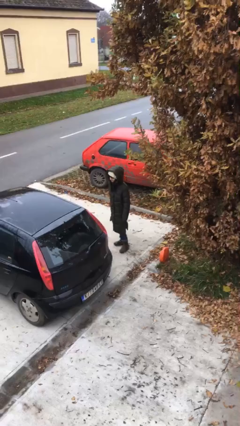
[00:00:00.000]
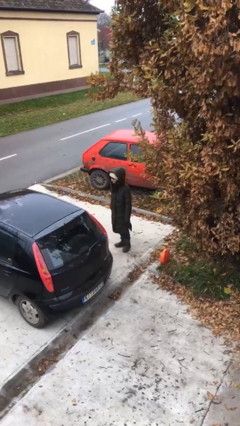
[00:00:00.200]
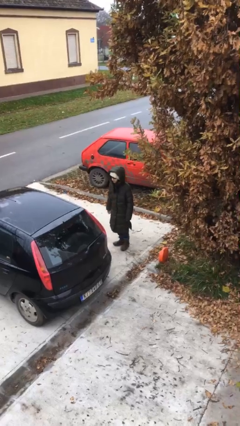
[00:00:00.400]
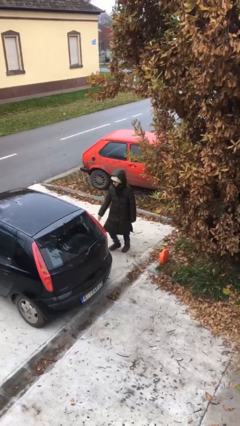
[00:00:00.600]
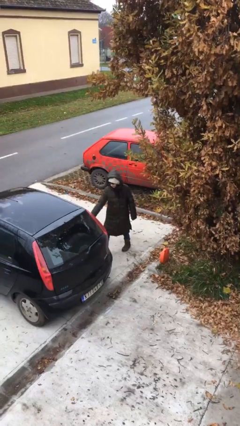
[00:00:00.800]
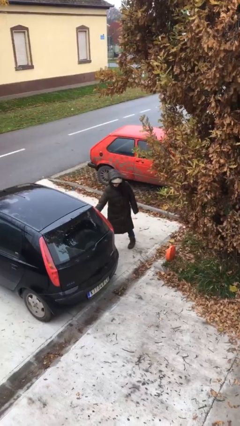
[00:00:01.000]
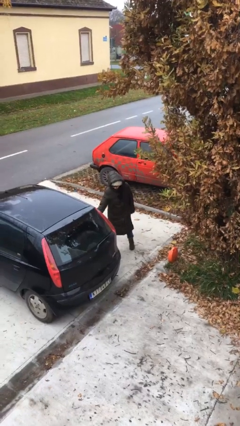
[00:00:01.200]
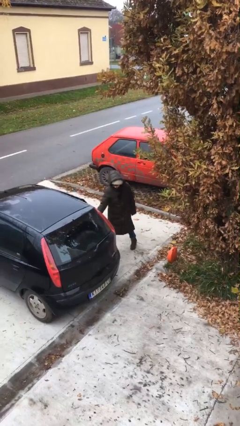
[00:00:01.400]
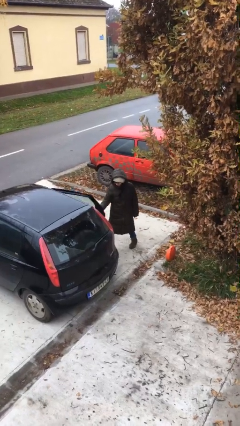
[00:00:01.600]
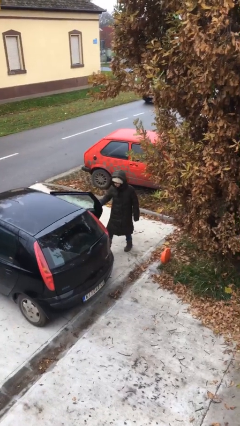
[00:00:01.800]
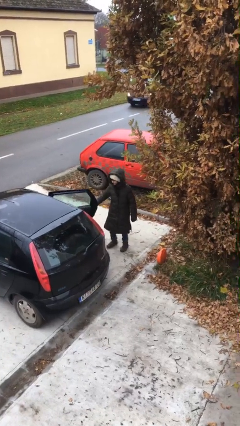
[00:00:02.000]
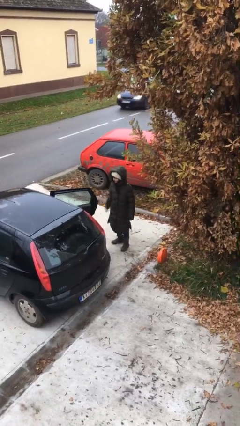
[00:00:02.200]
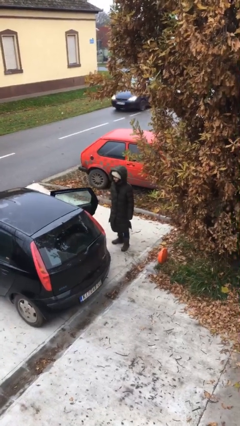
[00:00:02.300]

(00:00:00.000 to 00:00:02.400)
person opens car door

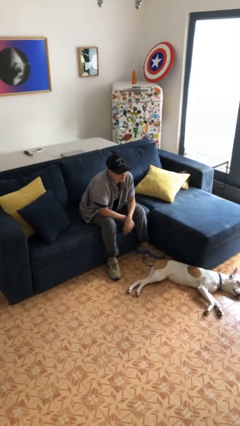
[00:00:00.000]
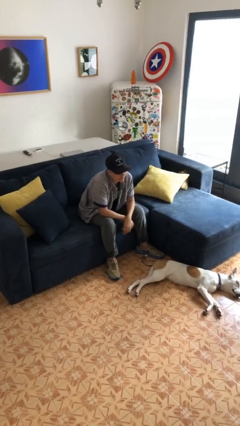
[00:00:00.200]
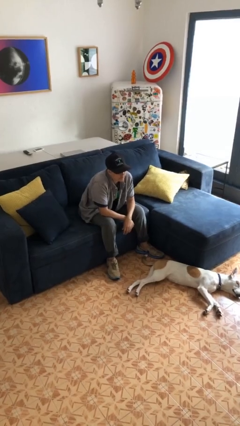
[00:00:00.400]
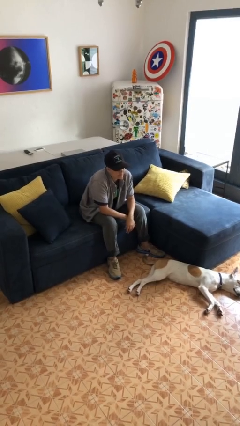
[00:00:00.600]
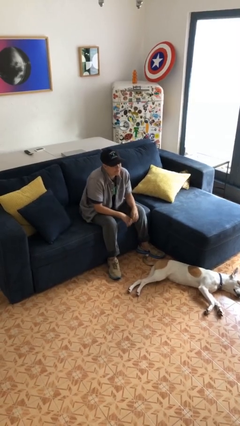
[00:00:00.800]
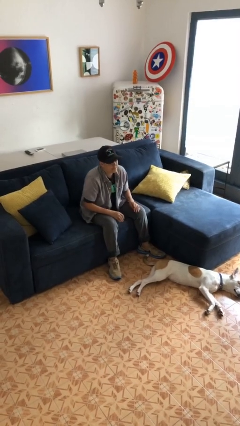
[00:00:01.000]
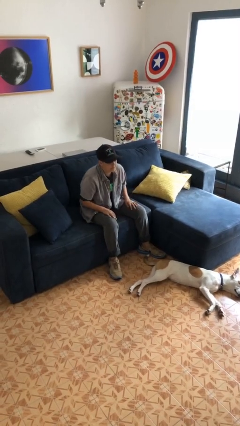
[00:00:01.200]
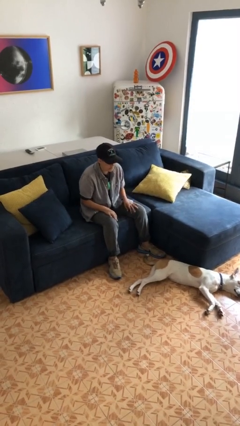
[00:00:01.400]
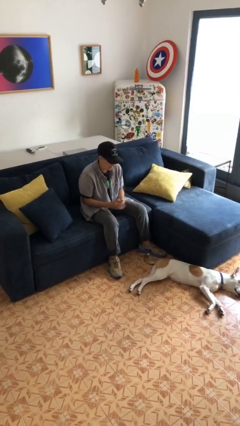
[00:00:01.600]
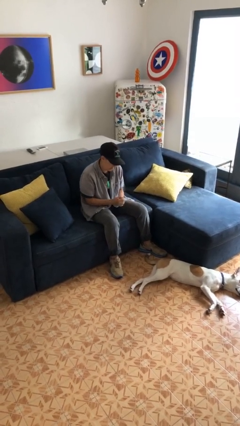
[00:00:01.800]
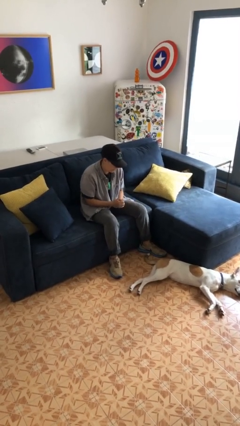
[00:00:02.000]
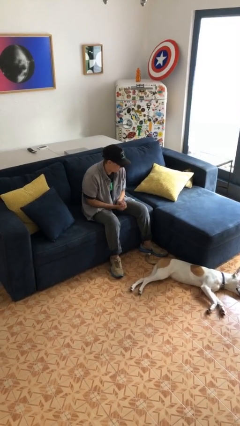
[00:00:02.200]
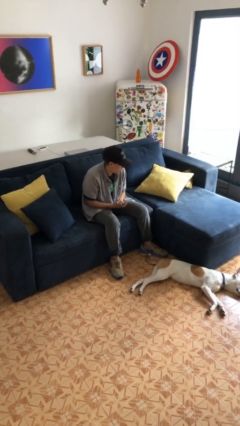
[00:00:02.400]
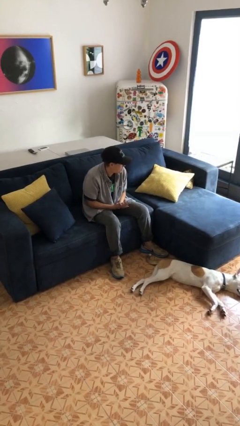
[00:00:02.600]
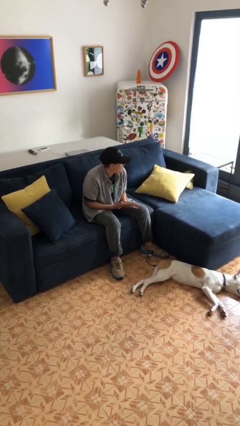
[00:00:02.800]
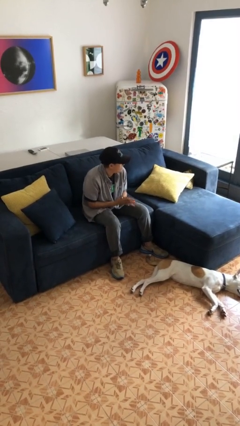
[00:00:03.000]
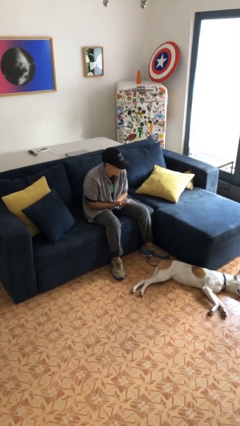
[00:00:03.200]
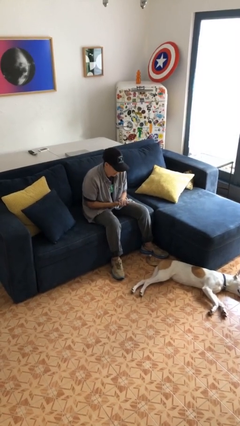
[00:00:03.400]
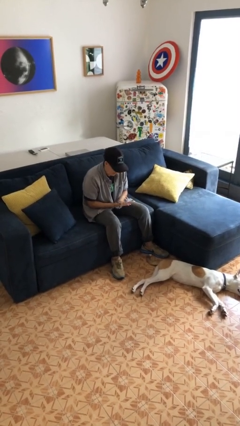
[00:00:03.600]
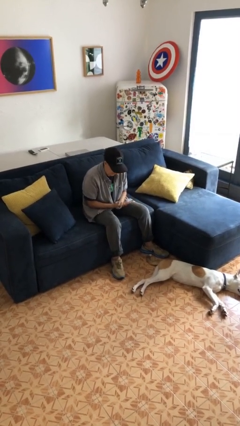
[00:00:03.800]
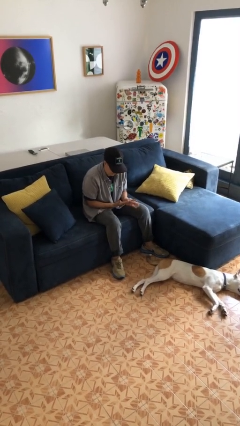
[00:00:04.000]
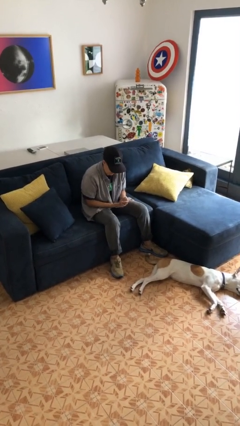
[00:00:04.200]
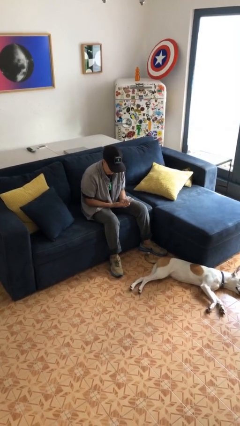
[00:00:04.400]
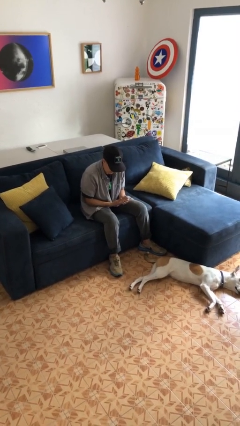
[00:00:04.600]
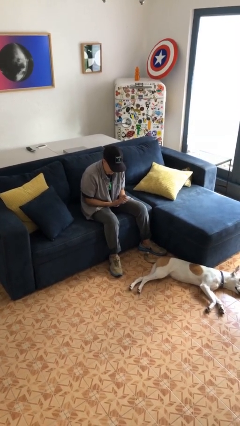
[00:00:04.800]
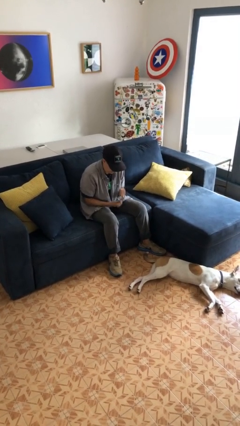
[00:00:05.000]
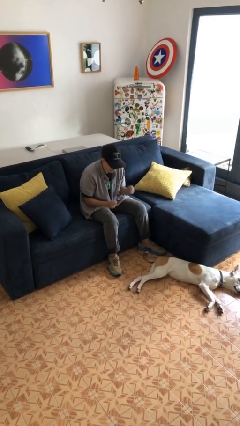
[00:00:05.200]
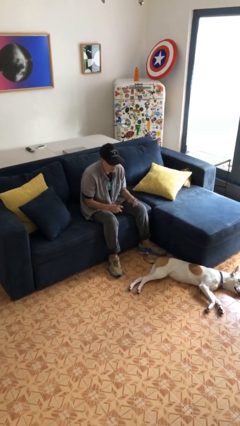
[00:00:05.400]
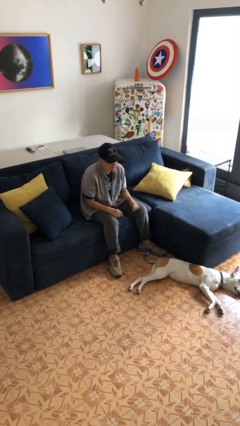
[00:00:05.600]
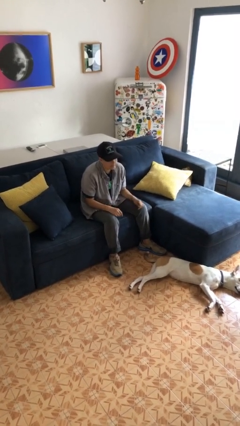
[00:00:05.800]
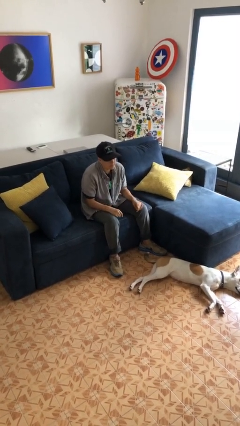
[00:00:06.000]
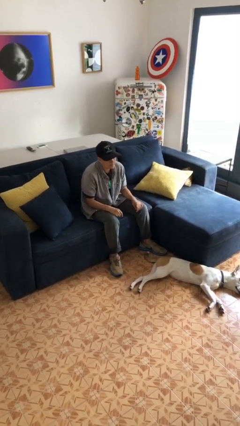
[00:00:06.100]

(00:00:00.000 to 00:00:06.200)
person looks at hands in lap

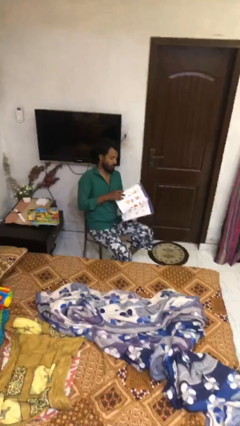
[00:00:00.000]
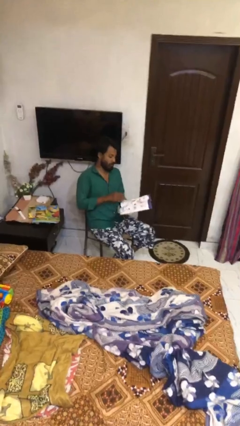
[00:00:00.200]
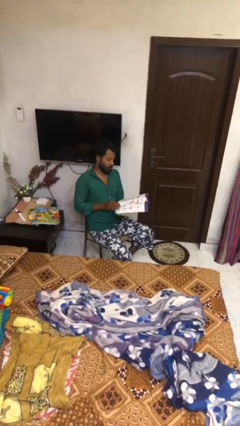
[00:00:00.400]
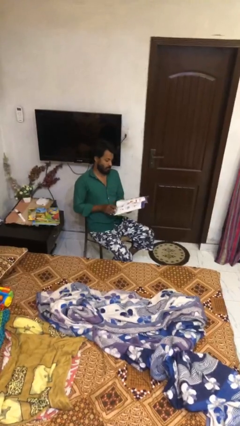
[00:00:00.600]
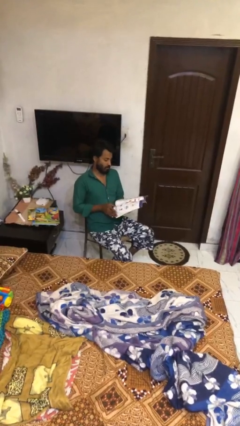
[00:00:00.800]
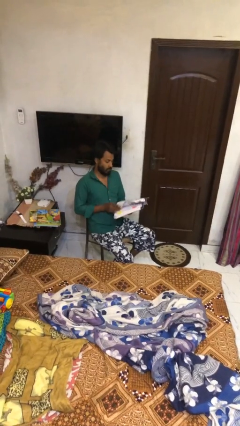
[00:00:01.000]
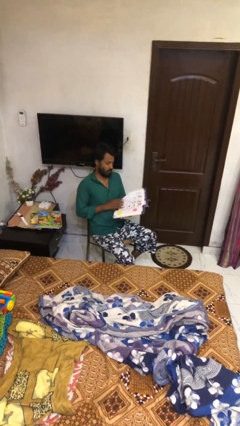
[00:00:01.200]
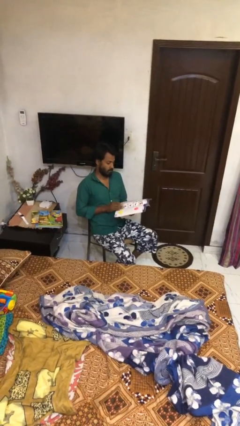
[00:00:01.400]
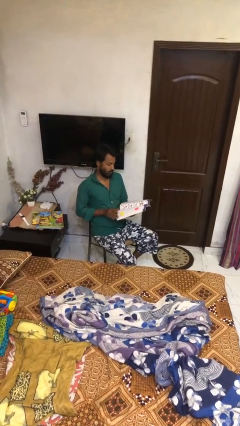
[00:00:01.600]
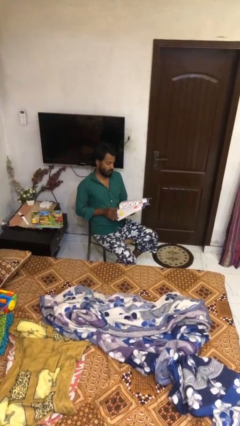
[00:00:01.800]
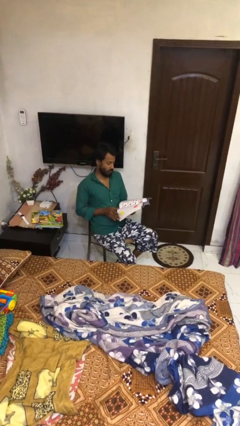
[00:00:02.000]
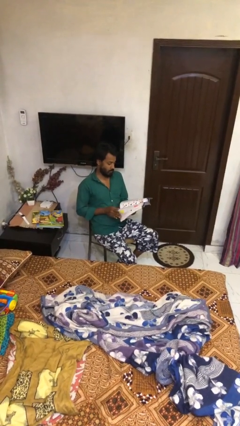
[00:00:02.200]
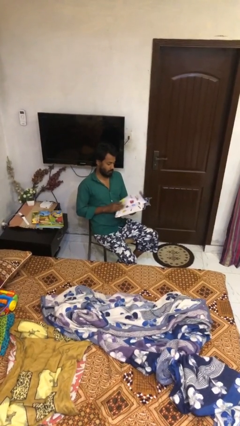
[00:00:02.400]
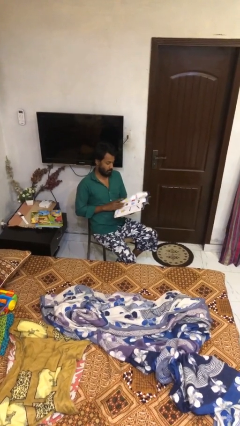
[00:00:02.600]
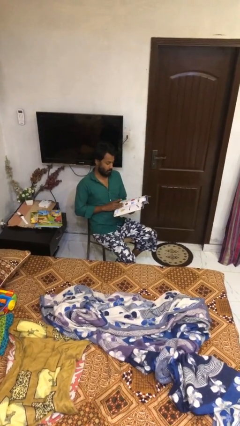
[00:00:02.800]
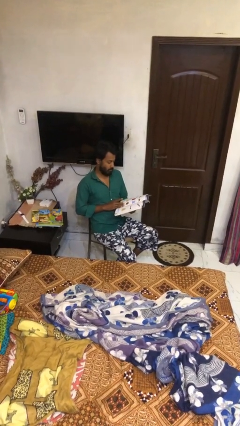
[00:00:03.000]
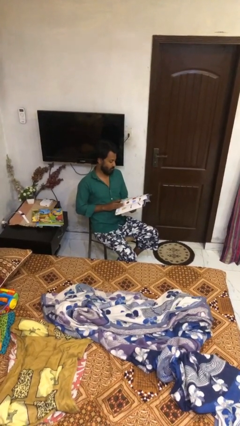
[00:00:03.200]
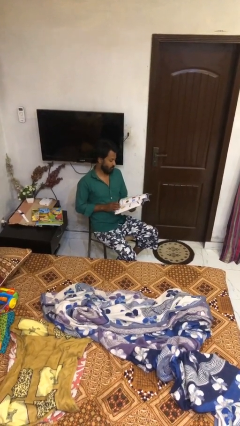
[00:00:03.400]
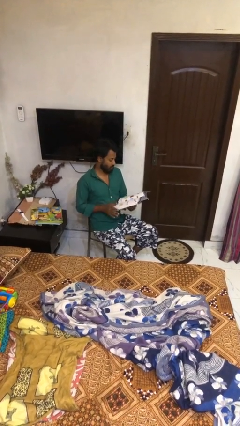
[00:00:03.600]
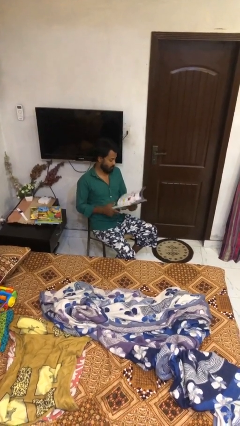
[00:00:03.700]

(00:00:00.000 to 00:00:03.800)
person reads document

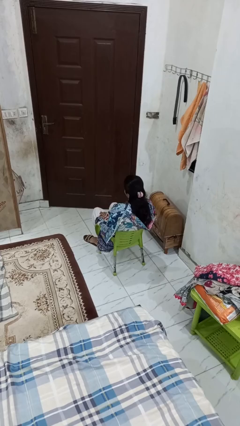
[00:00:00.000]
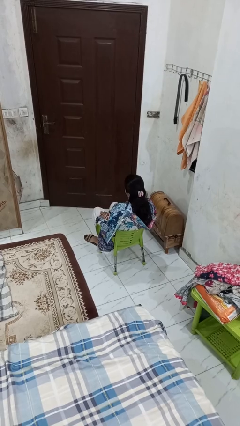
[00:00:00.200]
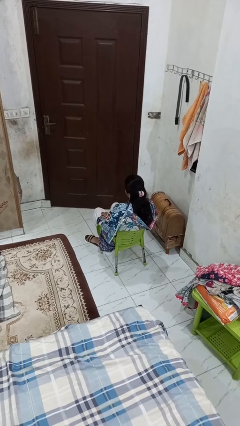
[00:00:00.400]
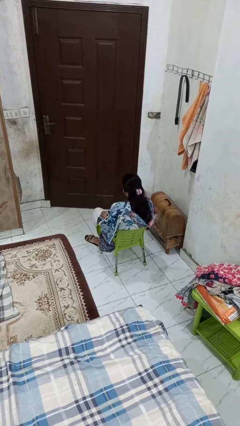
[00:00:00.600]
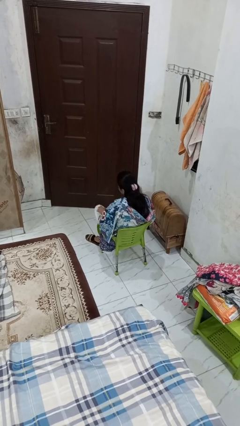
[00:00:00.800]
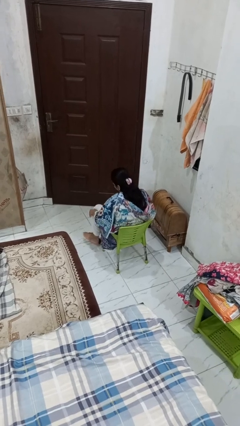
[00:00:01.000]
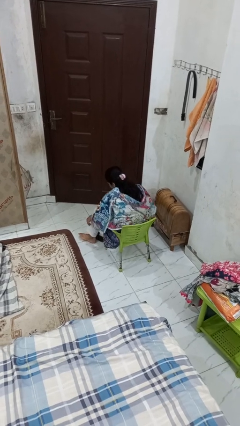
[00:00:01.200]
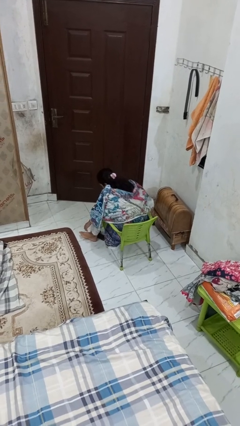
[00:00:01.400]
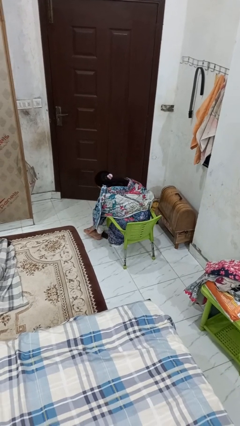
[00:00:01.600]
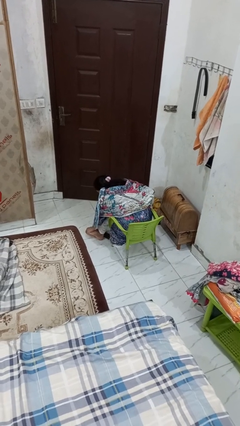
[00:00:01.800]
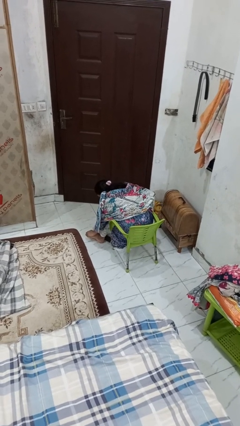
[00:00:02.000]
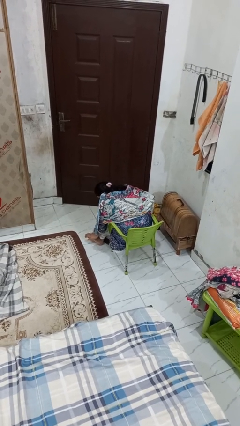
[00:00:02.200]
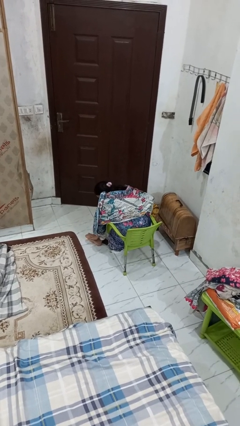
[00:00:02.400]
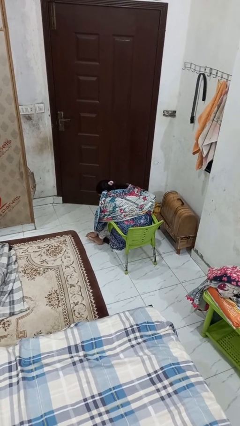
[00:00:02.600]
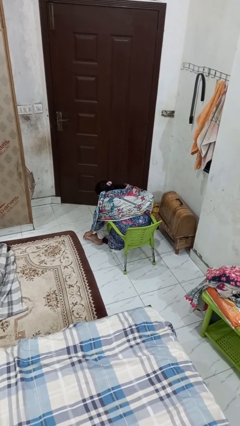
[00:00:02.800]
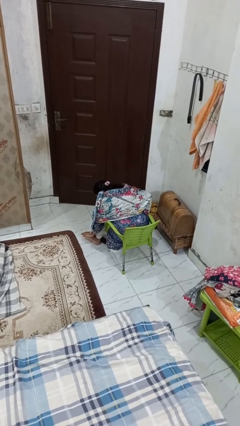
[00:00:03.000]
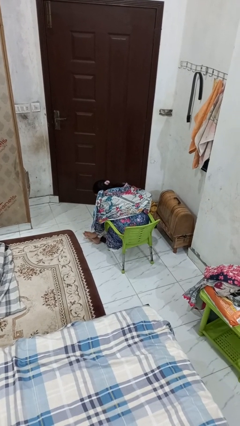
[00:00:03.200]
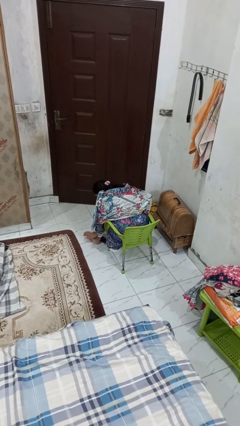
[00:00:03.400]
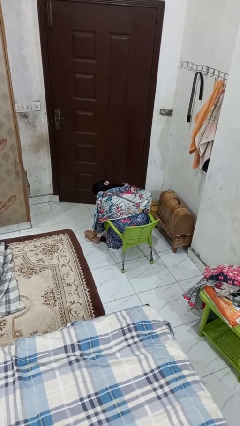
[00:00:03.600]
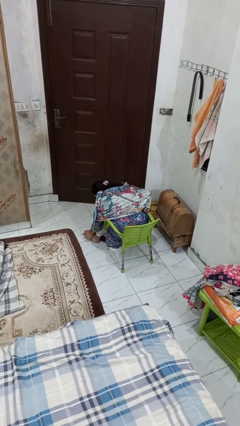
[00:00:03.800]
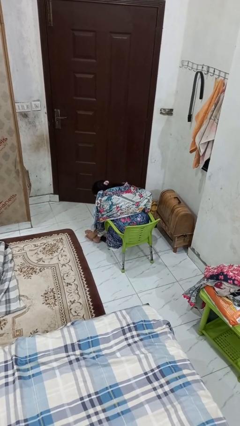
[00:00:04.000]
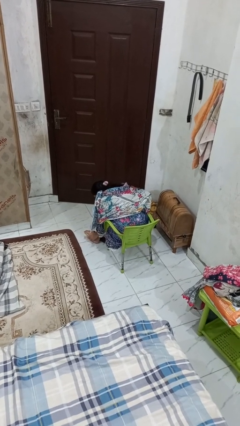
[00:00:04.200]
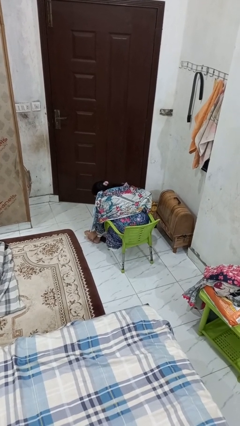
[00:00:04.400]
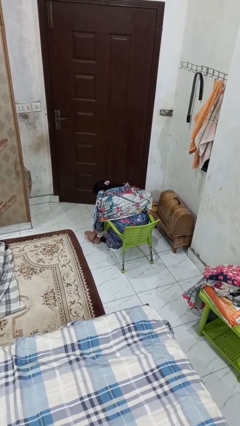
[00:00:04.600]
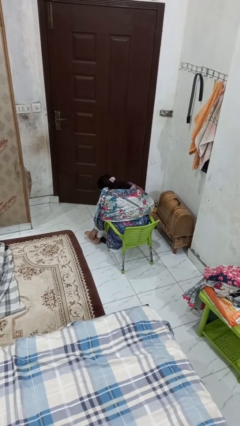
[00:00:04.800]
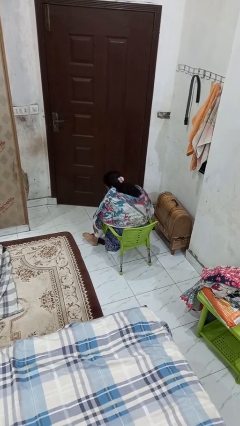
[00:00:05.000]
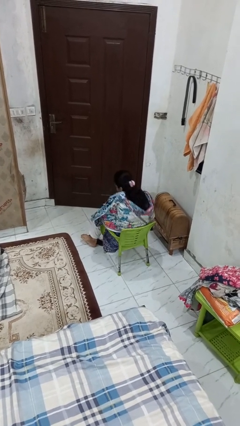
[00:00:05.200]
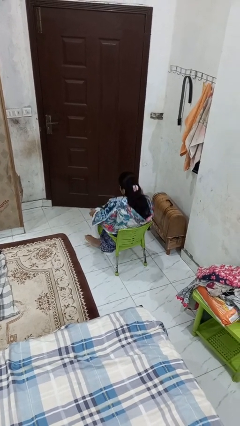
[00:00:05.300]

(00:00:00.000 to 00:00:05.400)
person rubs foot

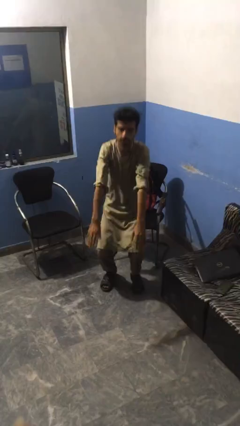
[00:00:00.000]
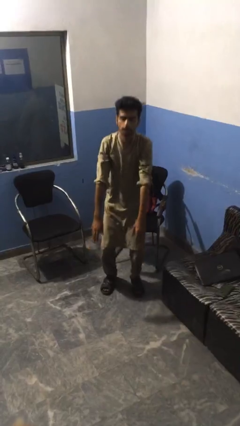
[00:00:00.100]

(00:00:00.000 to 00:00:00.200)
person stands up
